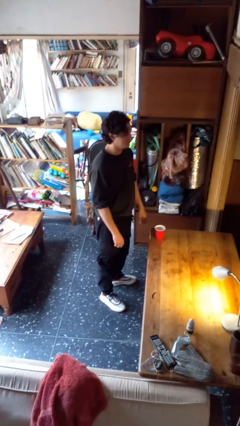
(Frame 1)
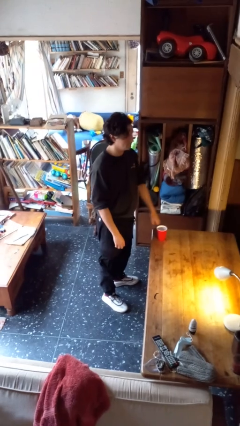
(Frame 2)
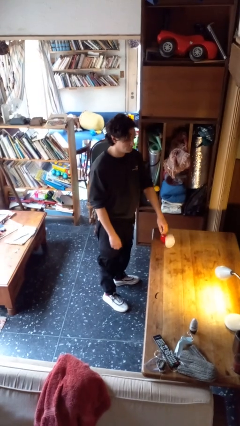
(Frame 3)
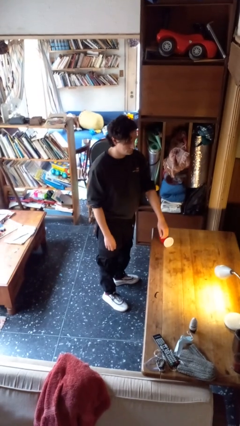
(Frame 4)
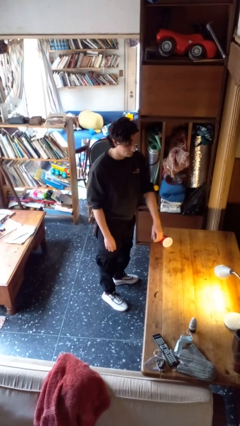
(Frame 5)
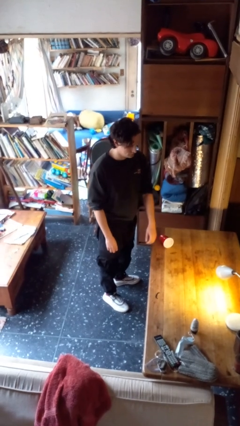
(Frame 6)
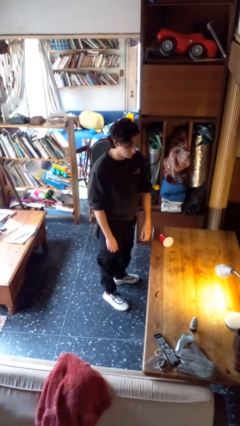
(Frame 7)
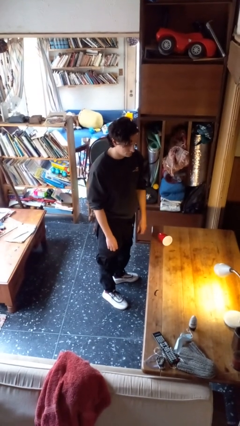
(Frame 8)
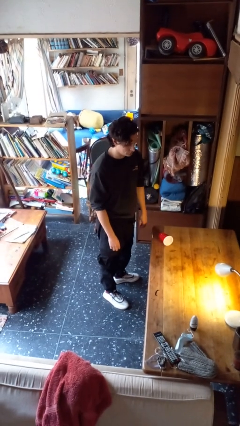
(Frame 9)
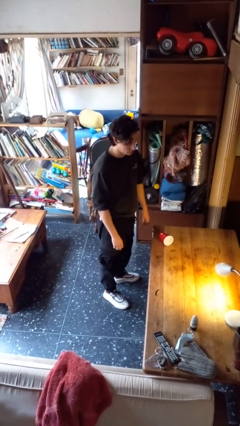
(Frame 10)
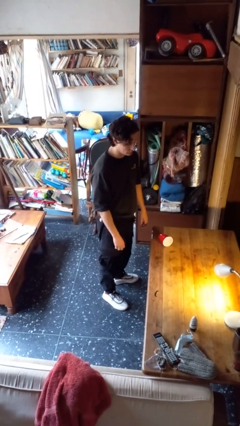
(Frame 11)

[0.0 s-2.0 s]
person spills on table

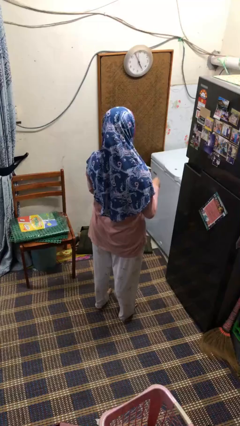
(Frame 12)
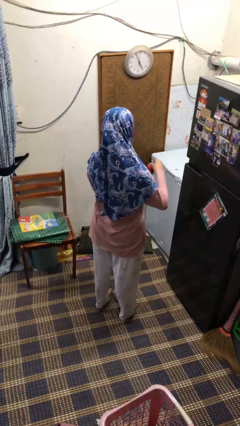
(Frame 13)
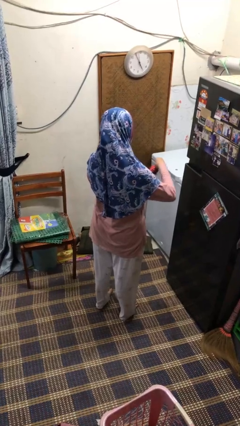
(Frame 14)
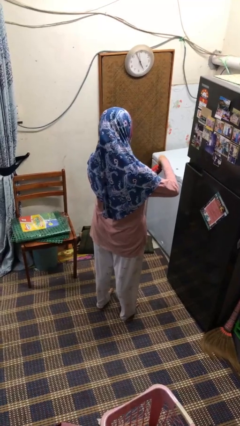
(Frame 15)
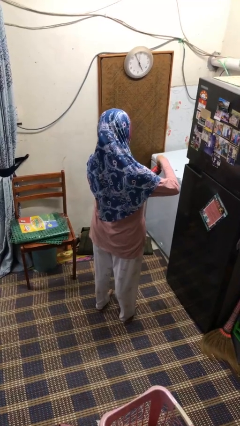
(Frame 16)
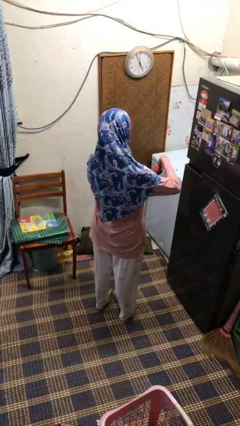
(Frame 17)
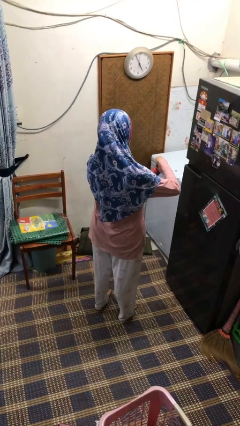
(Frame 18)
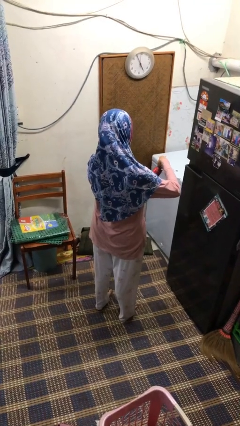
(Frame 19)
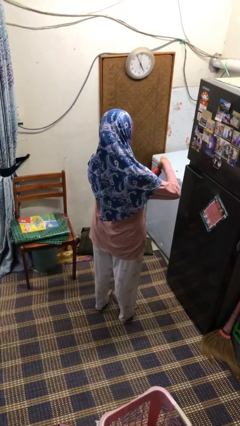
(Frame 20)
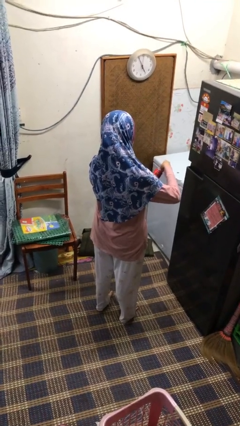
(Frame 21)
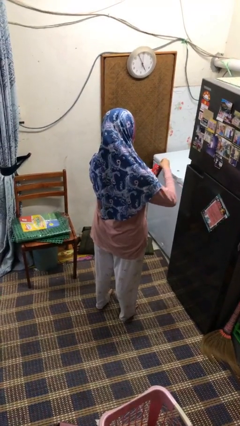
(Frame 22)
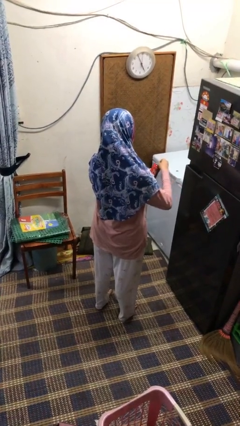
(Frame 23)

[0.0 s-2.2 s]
person opens beverage can

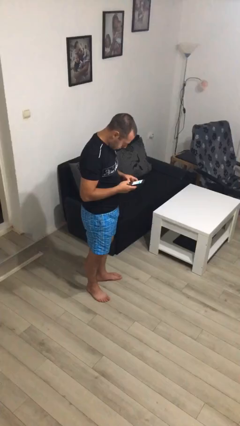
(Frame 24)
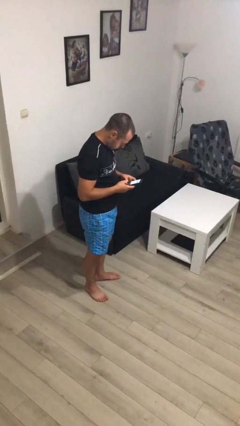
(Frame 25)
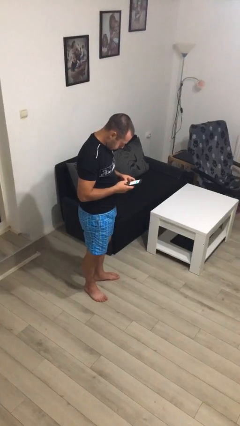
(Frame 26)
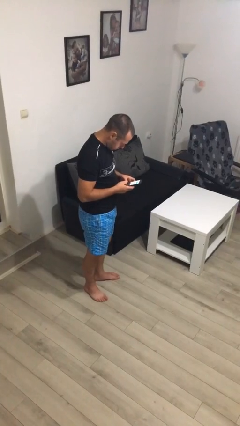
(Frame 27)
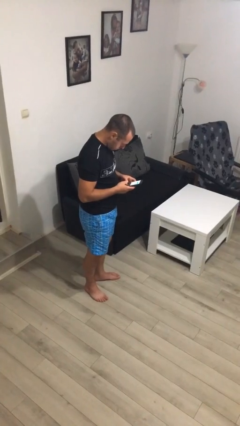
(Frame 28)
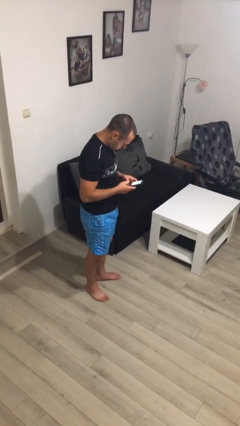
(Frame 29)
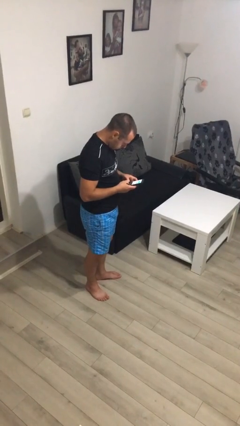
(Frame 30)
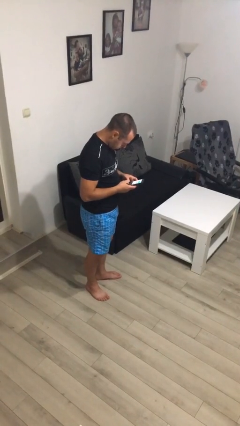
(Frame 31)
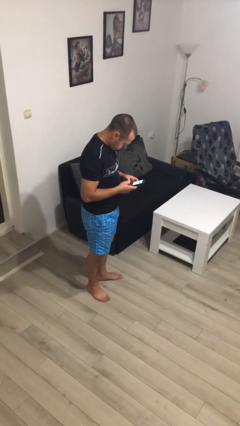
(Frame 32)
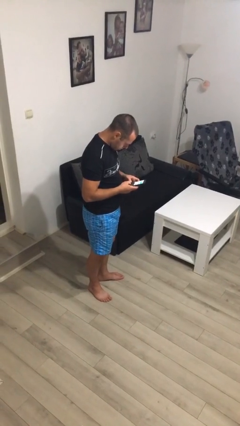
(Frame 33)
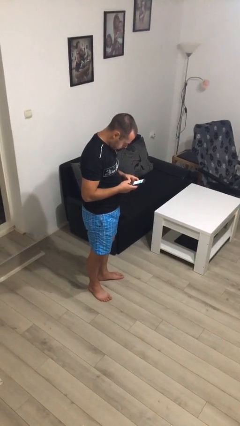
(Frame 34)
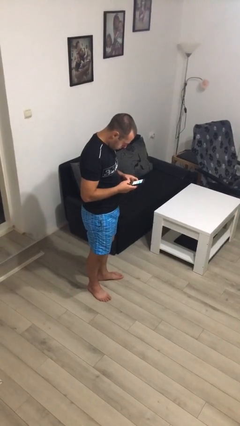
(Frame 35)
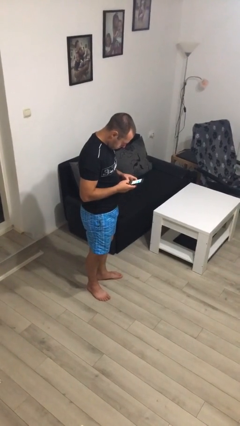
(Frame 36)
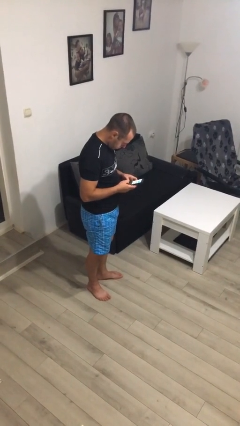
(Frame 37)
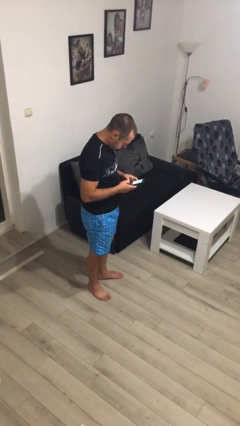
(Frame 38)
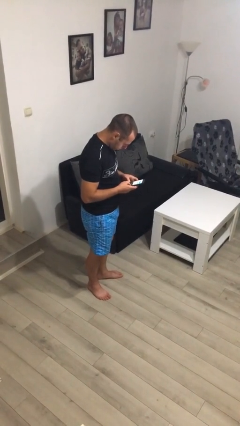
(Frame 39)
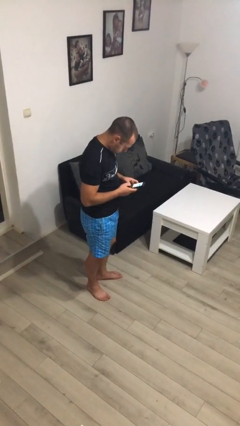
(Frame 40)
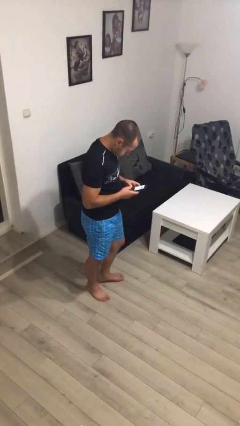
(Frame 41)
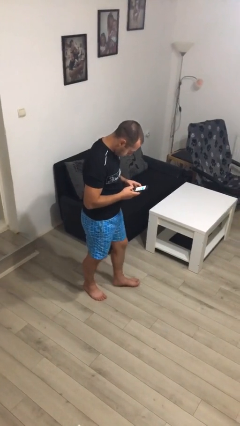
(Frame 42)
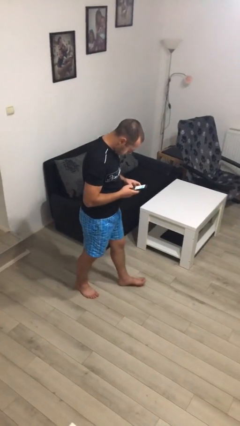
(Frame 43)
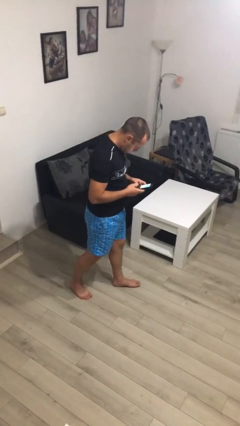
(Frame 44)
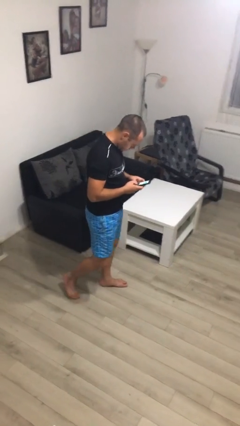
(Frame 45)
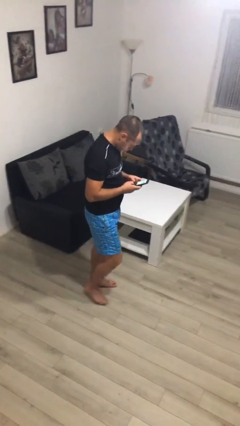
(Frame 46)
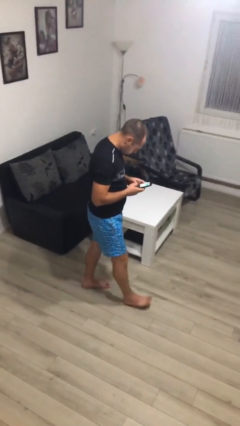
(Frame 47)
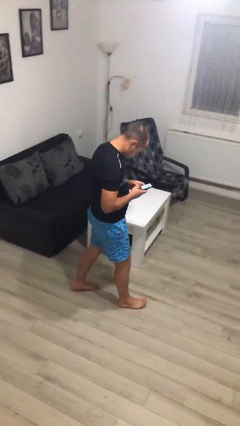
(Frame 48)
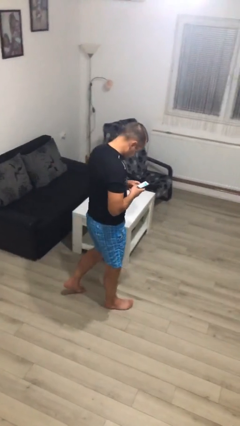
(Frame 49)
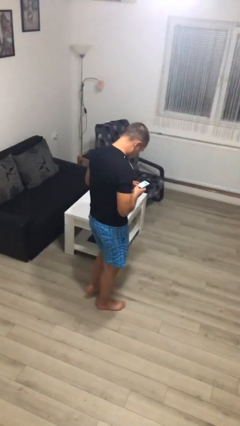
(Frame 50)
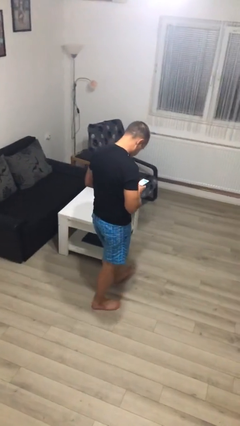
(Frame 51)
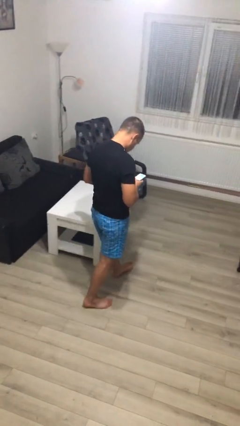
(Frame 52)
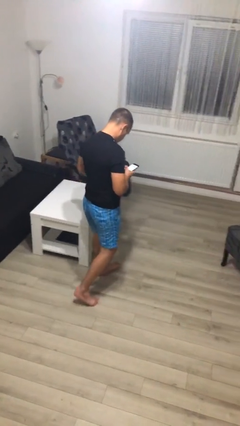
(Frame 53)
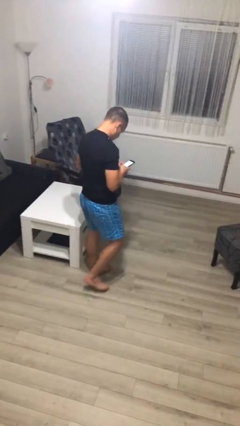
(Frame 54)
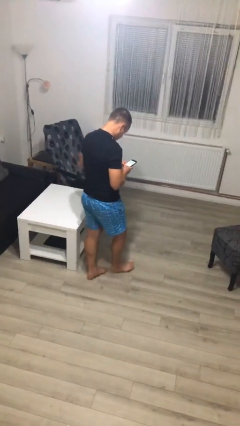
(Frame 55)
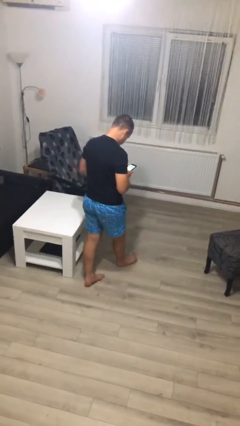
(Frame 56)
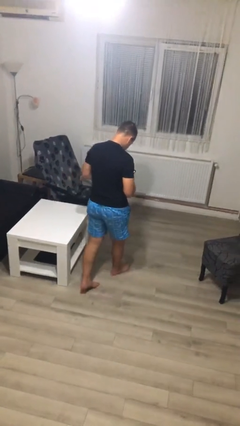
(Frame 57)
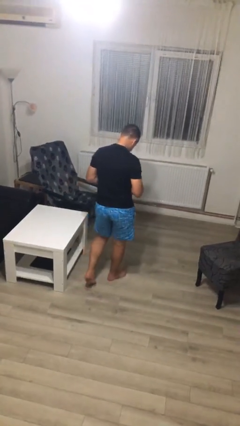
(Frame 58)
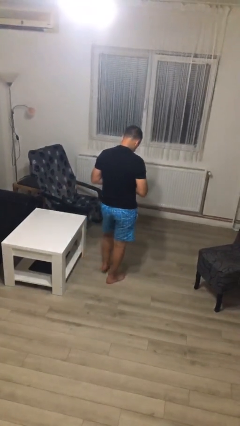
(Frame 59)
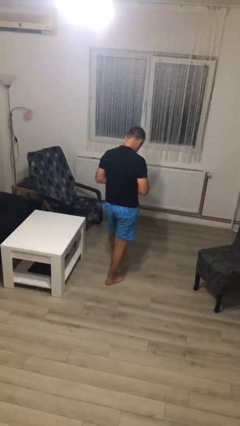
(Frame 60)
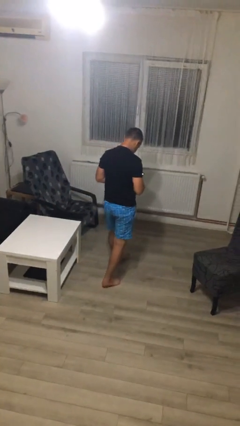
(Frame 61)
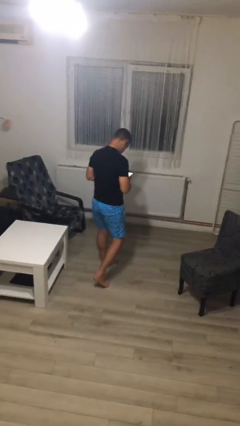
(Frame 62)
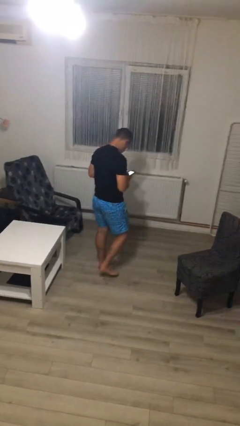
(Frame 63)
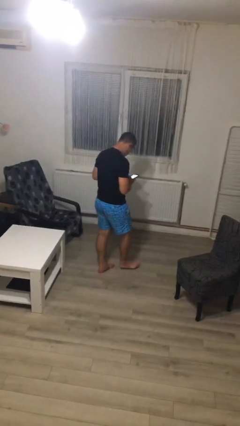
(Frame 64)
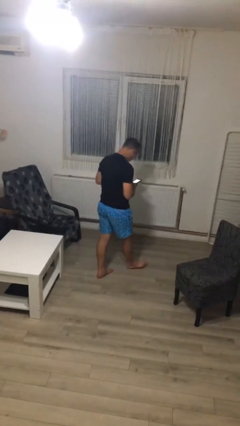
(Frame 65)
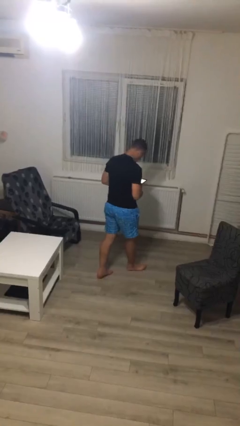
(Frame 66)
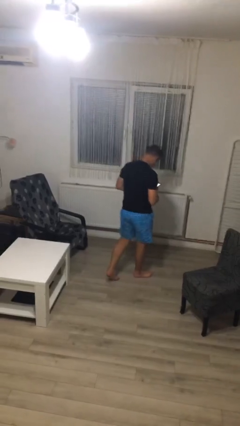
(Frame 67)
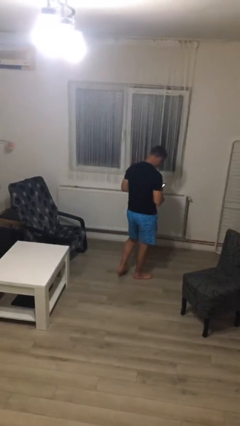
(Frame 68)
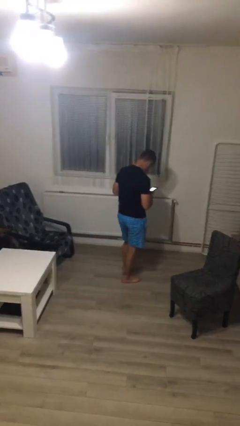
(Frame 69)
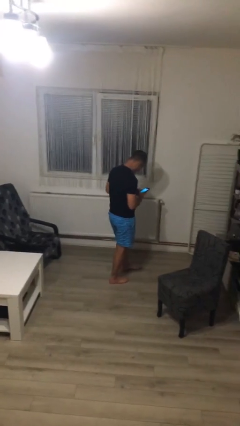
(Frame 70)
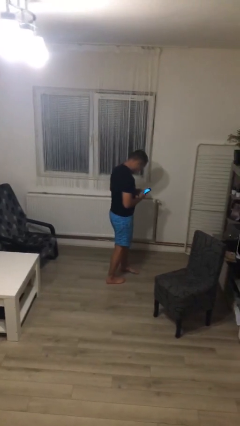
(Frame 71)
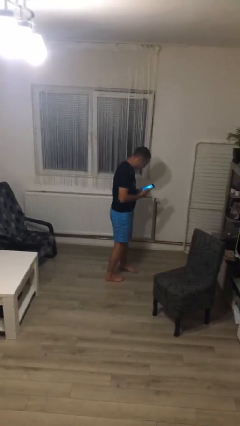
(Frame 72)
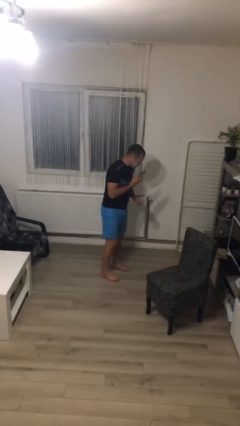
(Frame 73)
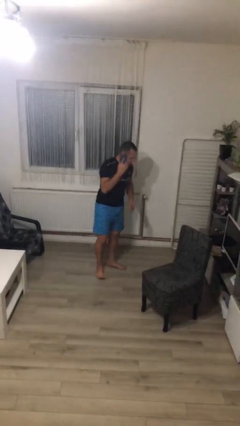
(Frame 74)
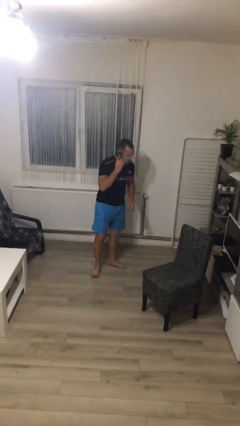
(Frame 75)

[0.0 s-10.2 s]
person texts on phone

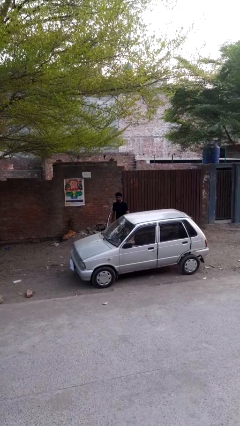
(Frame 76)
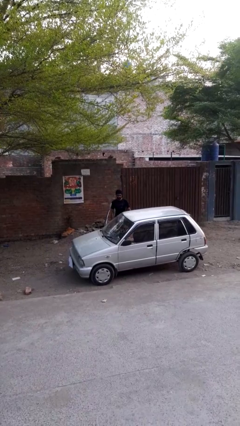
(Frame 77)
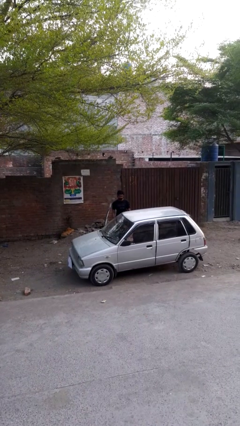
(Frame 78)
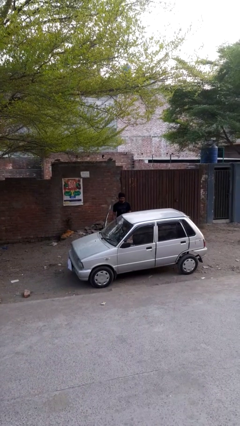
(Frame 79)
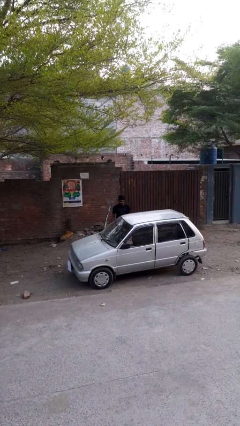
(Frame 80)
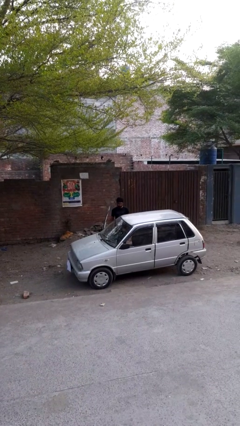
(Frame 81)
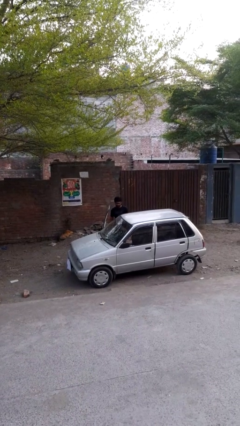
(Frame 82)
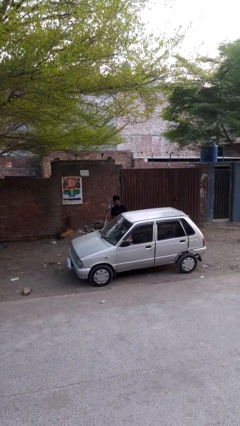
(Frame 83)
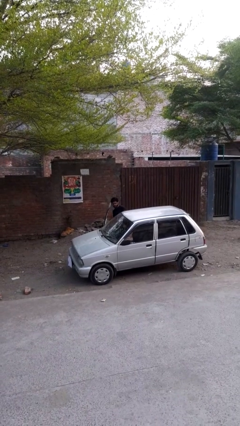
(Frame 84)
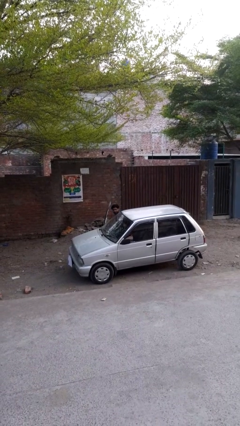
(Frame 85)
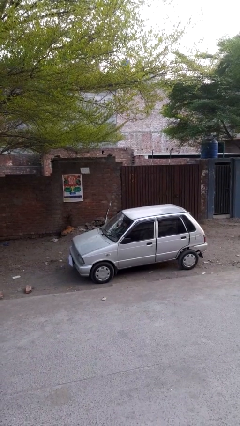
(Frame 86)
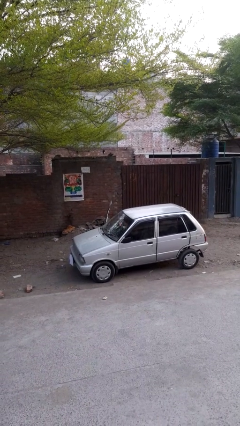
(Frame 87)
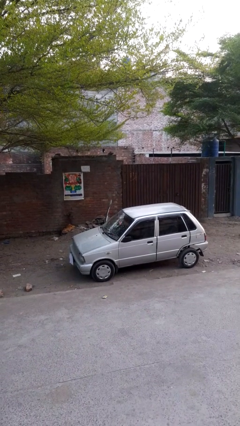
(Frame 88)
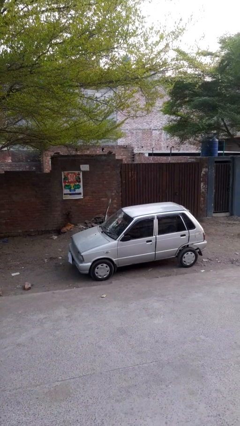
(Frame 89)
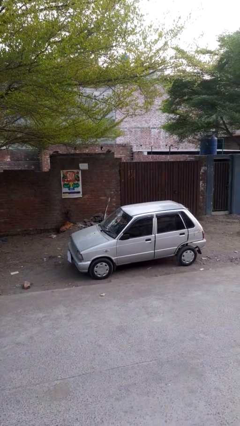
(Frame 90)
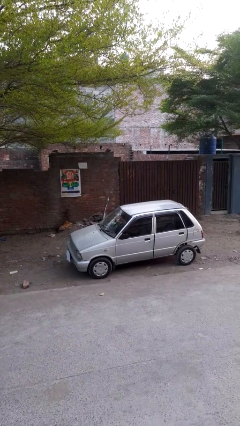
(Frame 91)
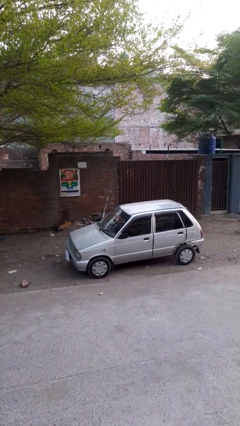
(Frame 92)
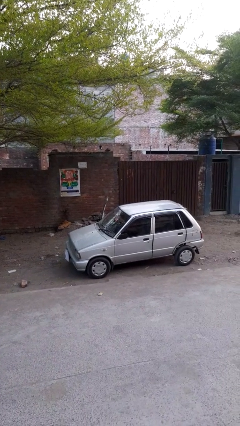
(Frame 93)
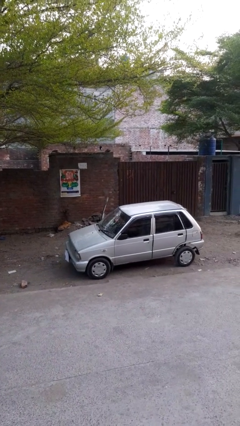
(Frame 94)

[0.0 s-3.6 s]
person enters car
